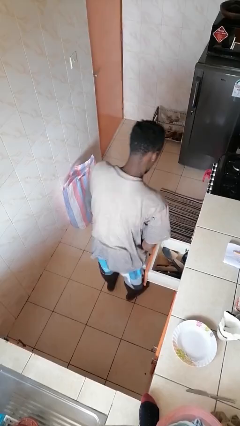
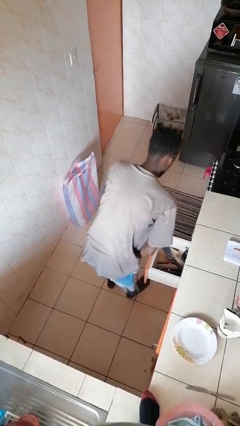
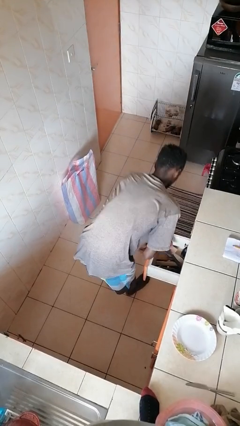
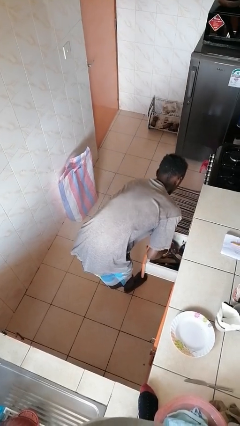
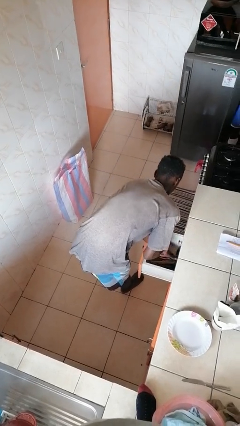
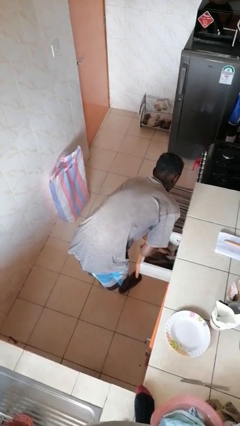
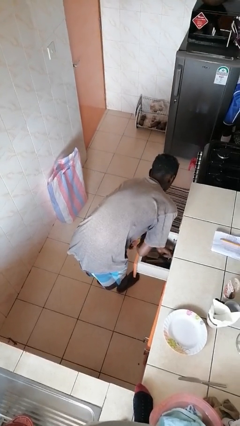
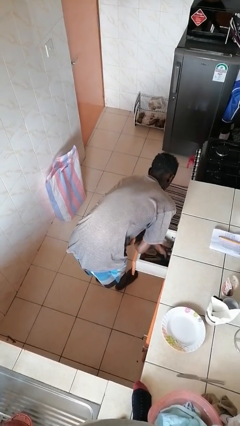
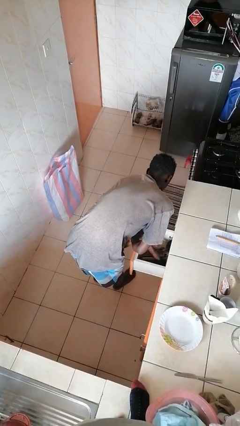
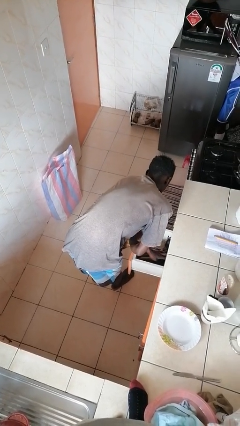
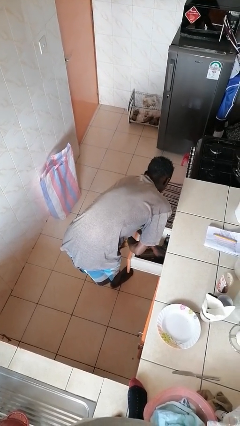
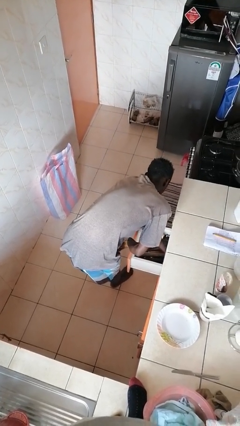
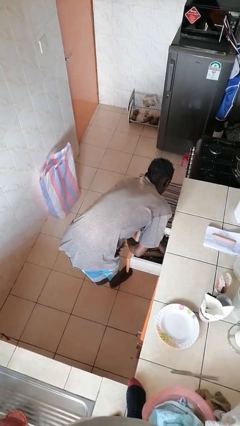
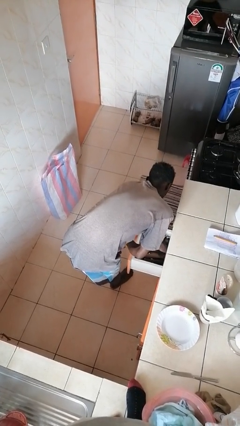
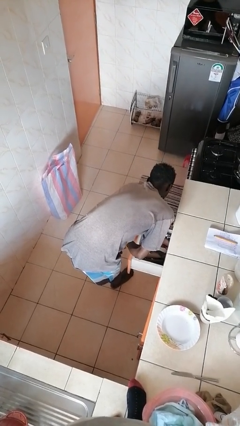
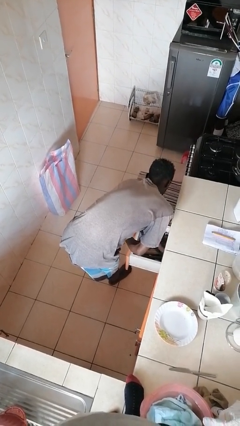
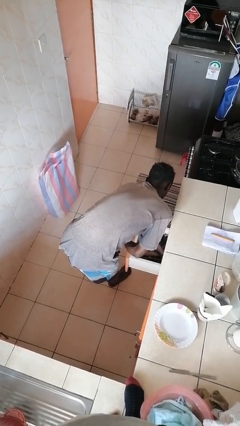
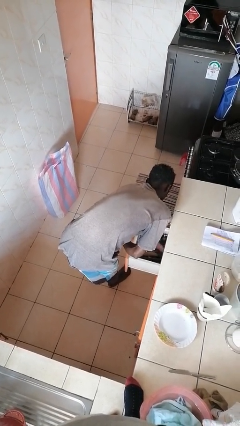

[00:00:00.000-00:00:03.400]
person searches in kitchen drawer

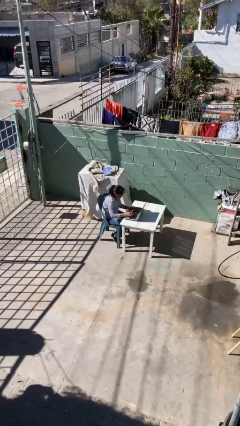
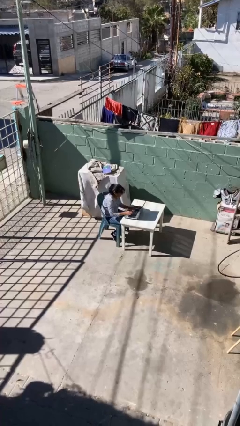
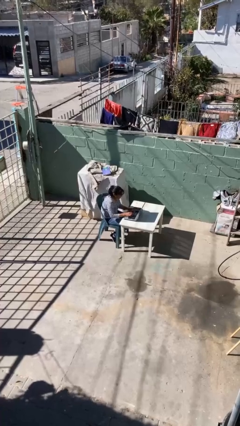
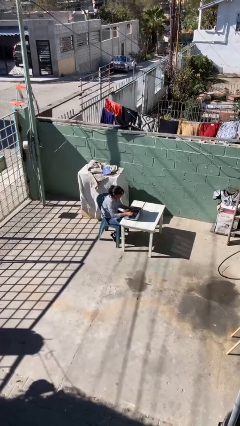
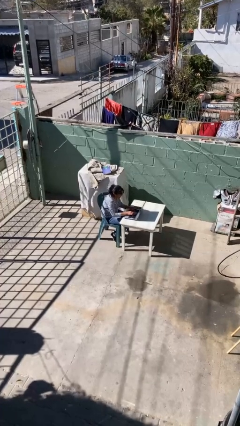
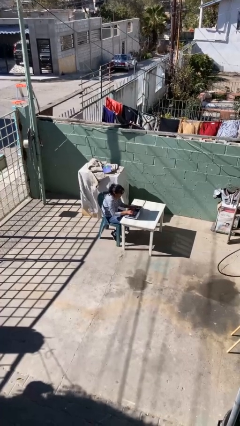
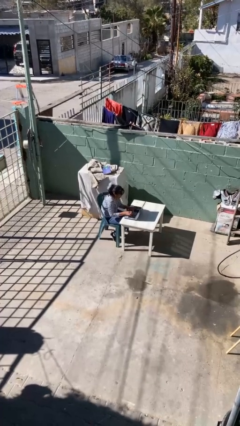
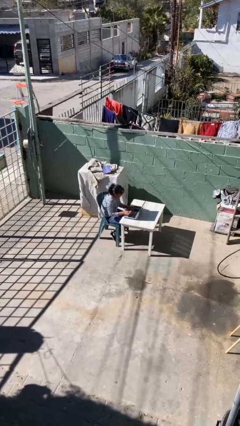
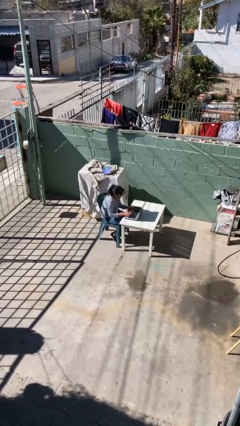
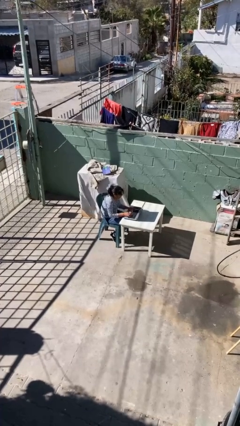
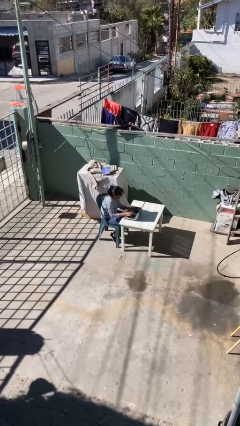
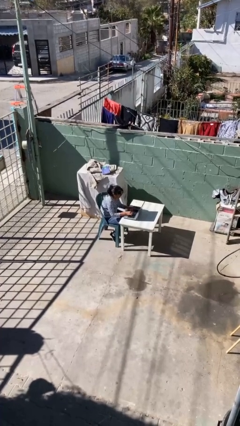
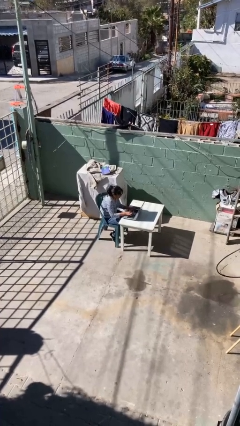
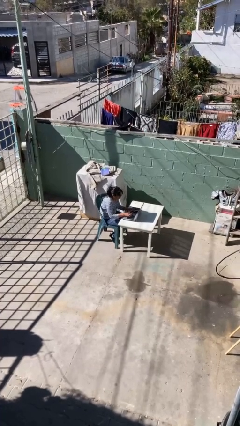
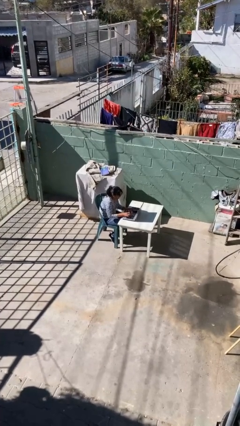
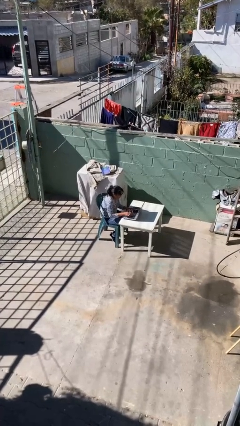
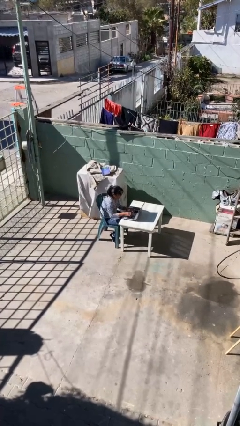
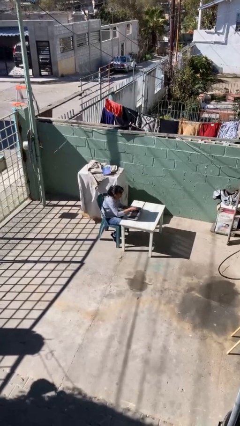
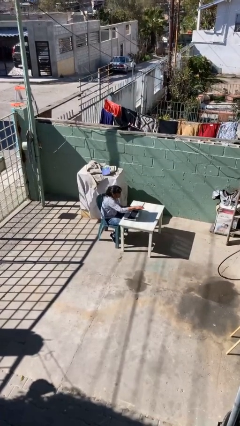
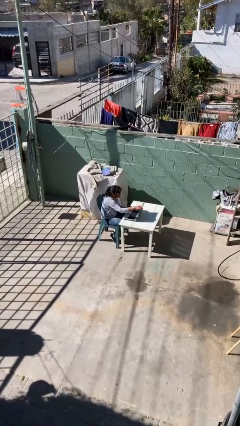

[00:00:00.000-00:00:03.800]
person interacts with laptop

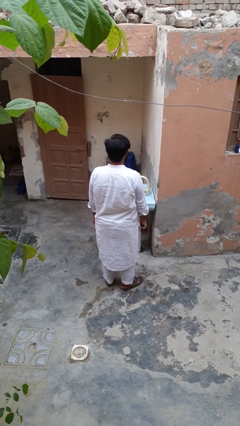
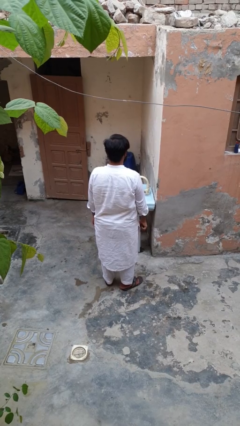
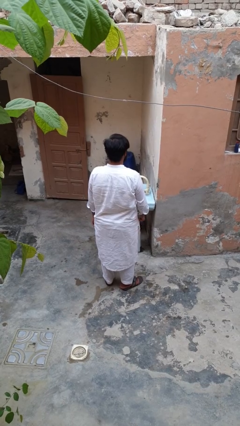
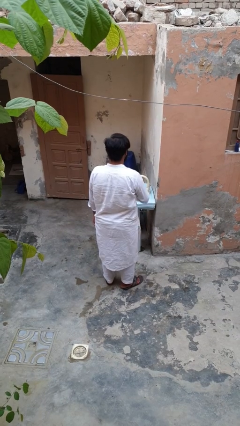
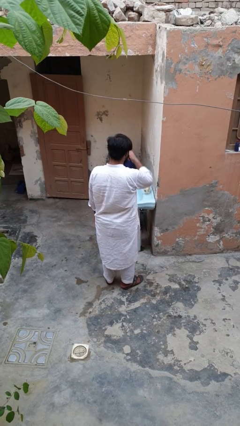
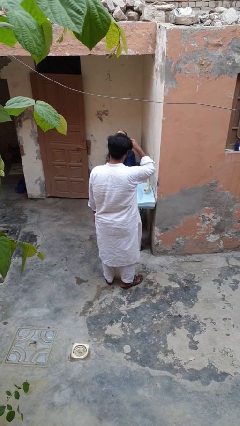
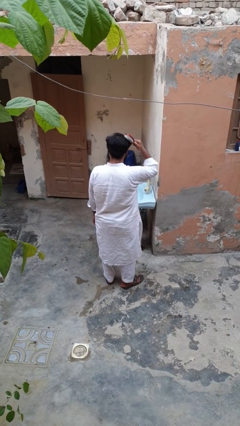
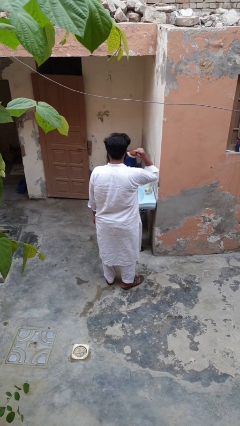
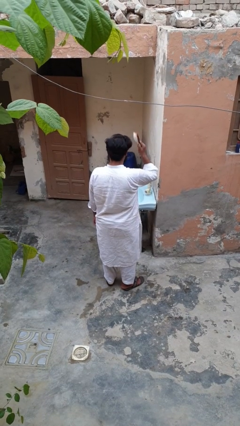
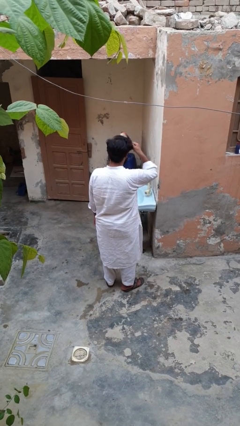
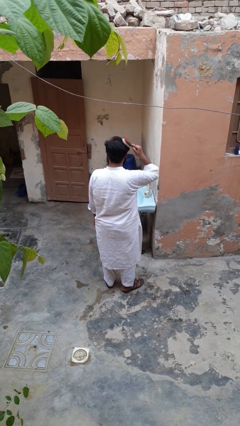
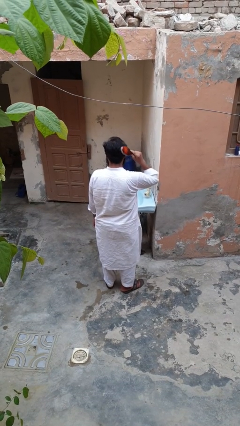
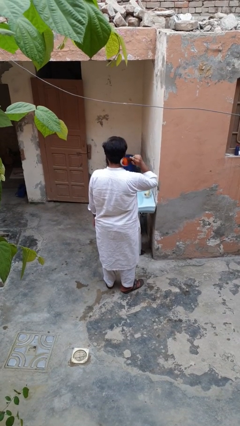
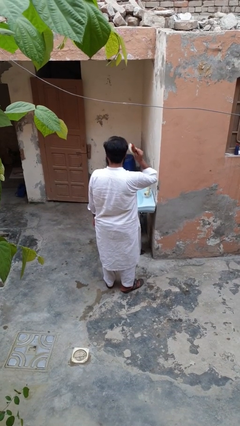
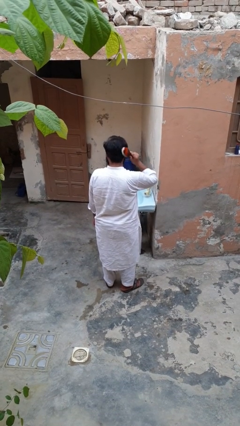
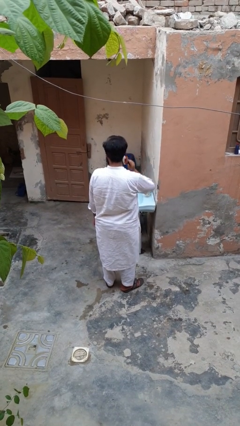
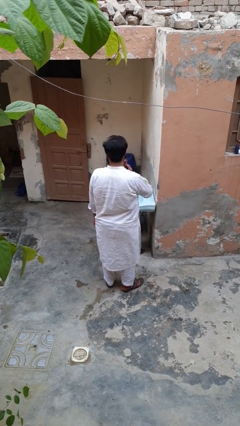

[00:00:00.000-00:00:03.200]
person brushes hair

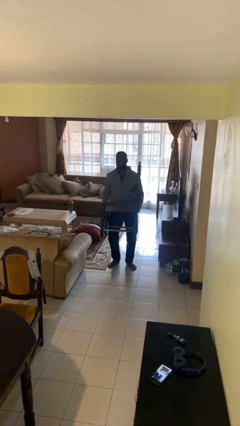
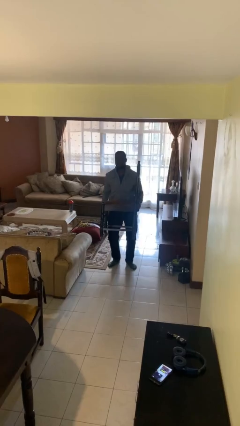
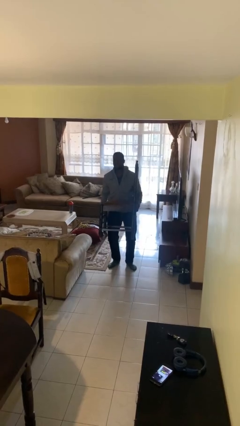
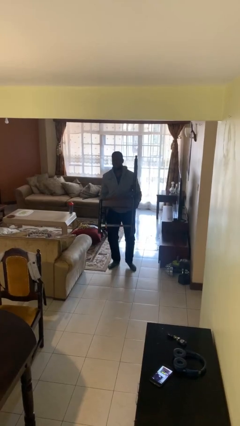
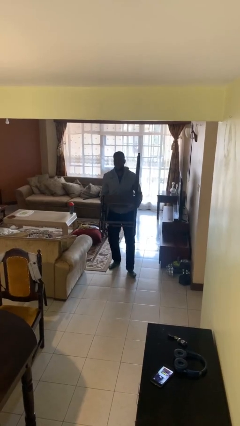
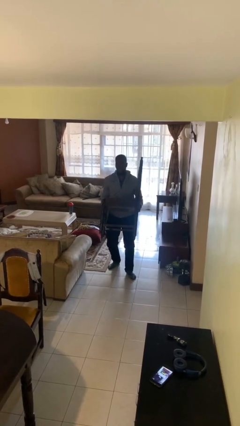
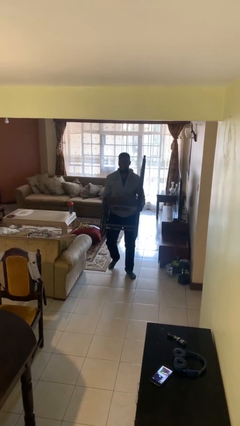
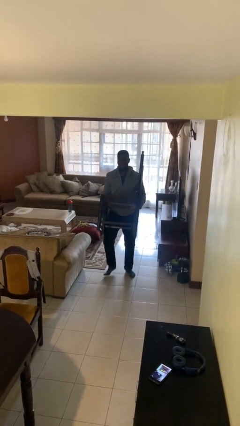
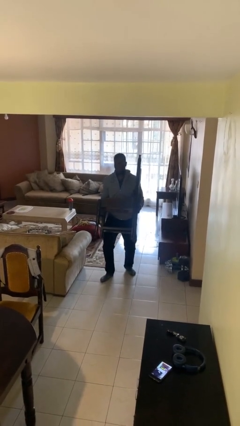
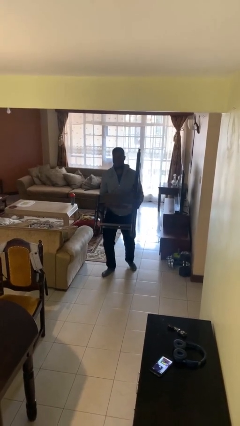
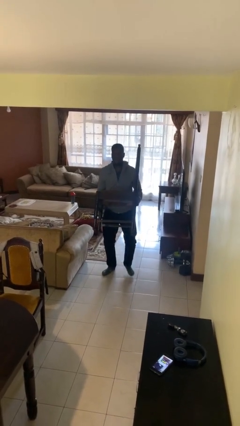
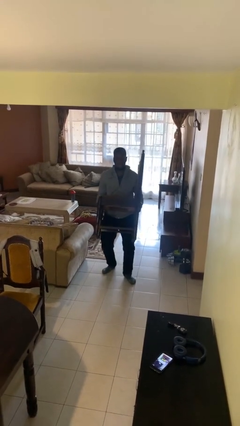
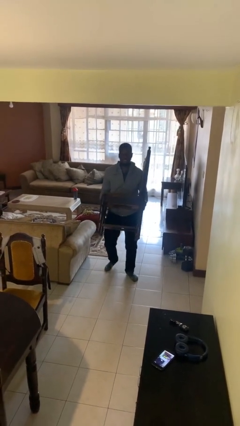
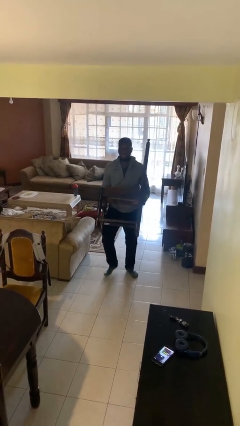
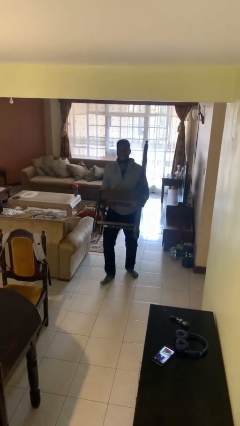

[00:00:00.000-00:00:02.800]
person carries heavy object

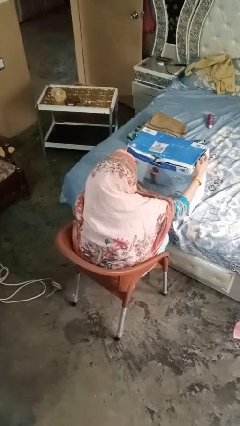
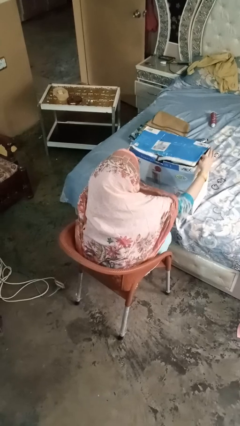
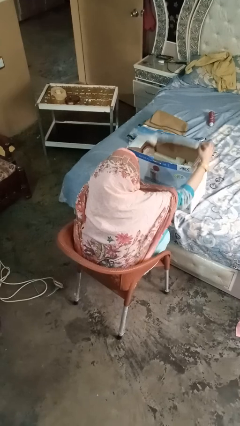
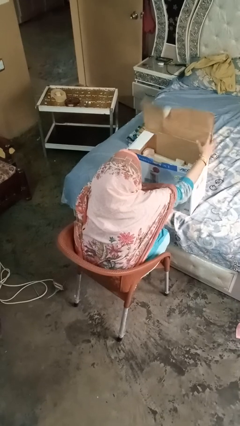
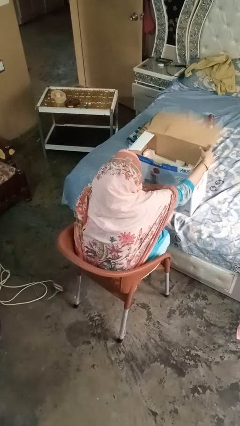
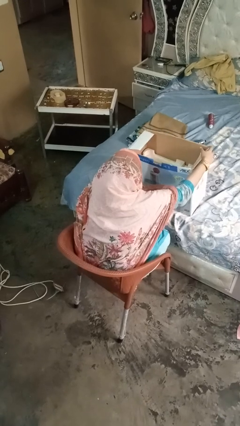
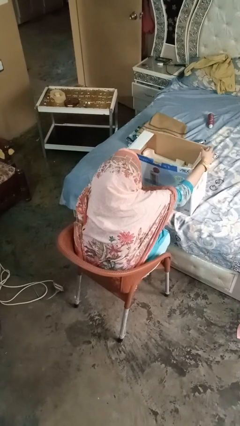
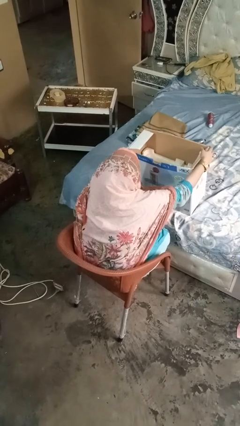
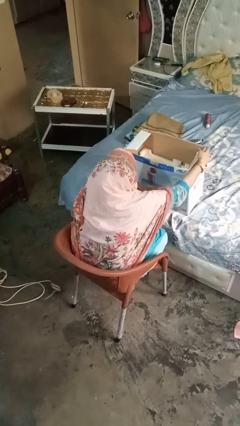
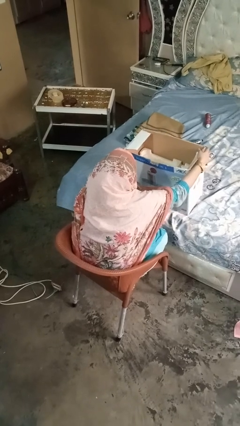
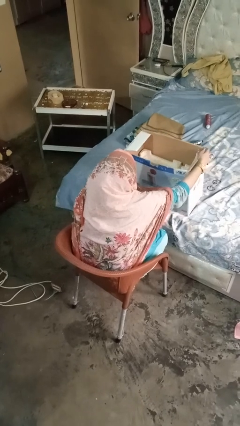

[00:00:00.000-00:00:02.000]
person opens box

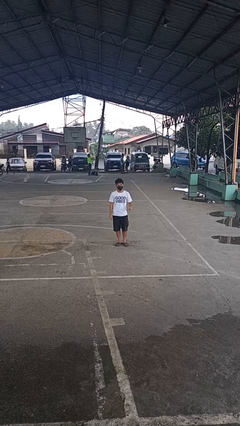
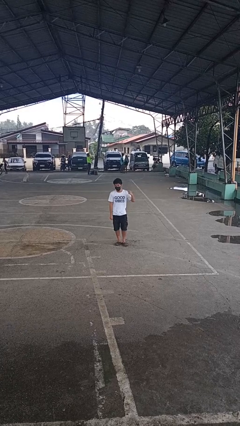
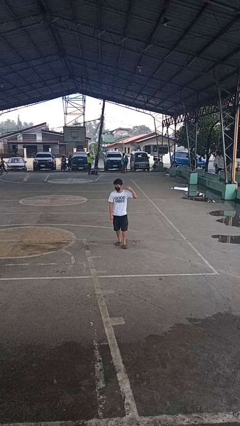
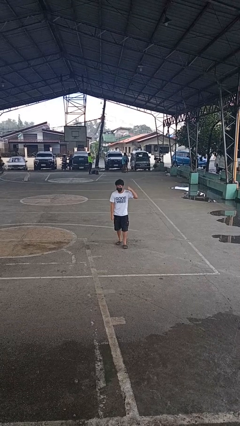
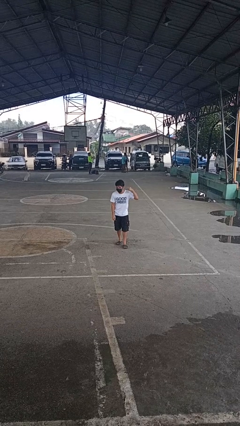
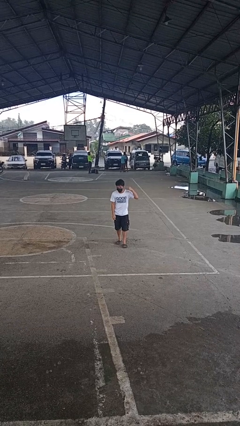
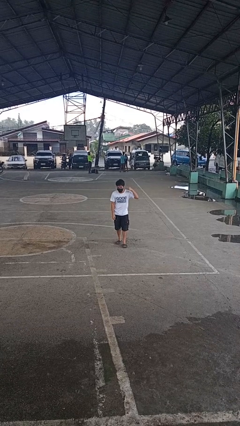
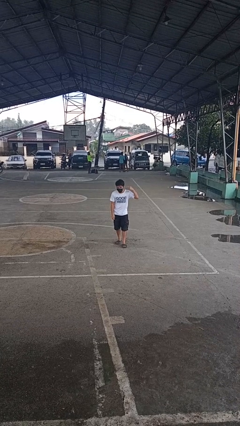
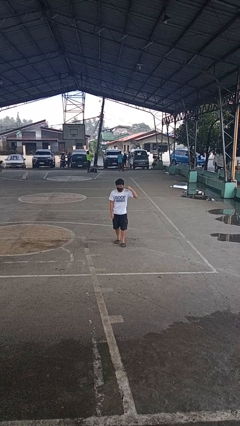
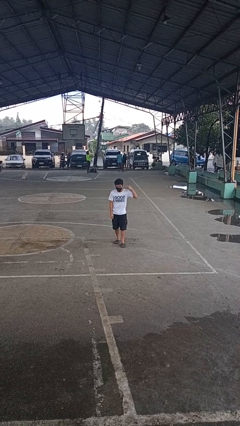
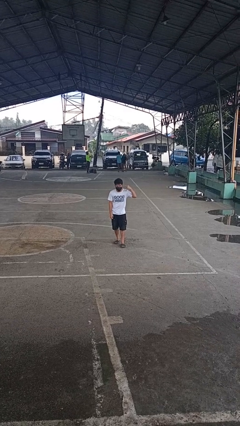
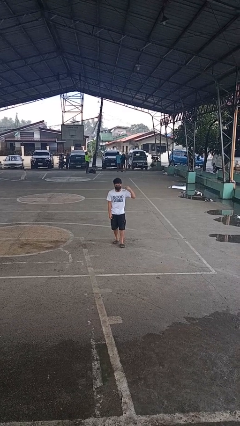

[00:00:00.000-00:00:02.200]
person gestures listen closely

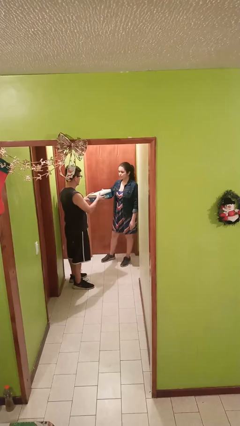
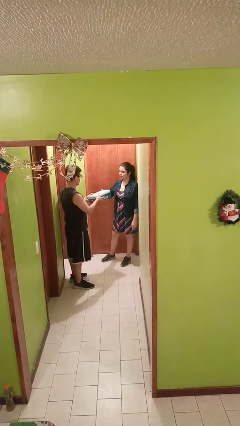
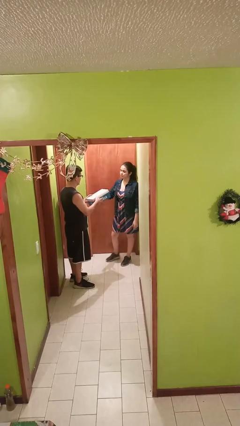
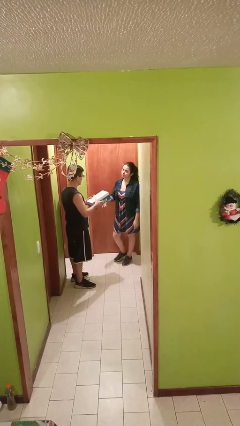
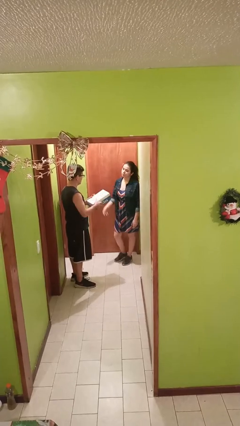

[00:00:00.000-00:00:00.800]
person transfers object to person
